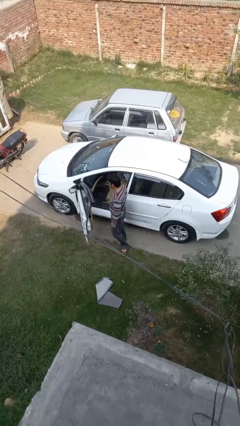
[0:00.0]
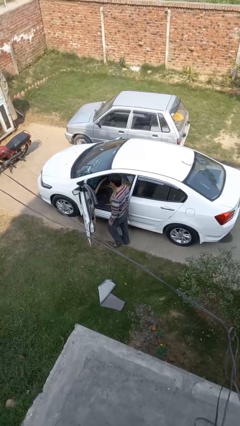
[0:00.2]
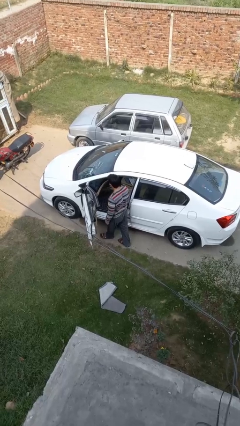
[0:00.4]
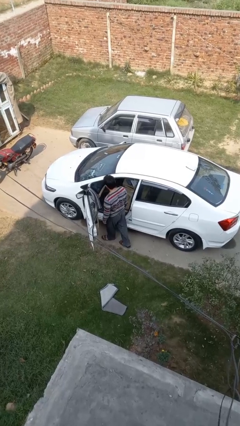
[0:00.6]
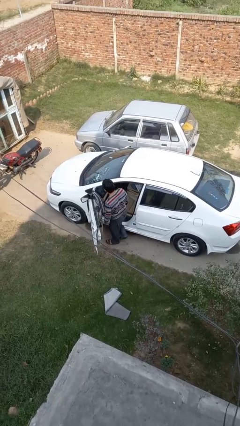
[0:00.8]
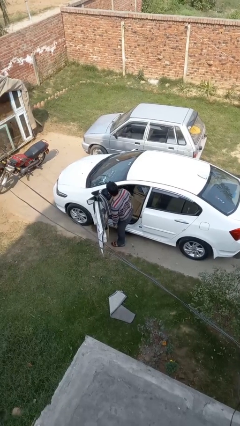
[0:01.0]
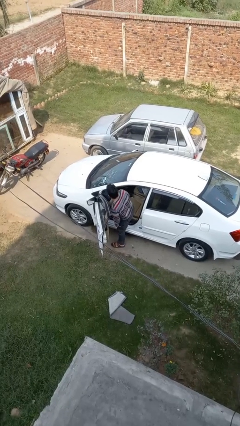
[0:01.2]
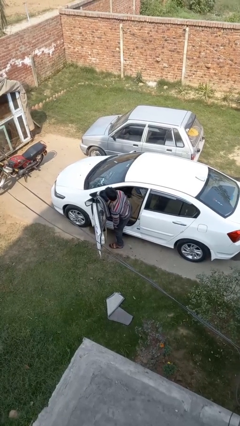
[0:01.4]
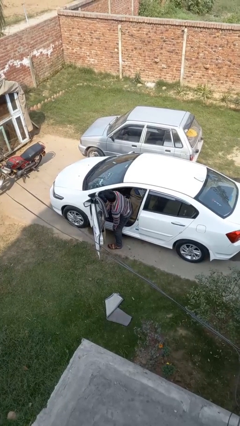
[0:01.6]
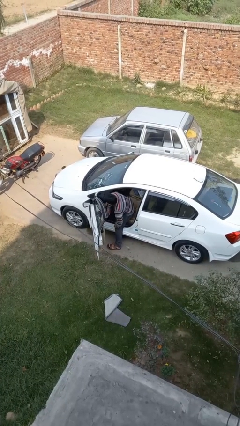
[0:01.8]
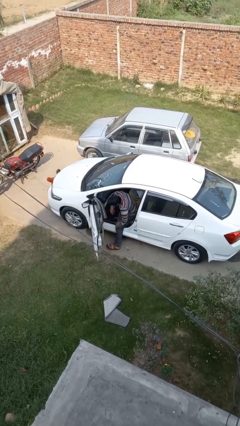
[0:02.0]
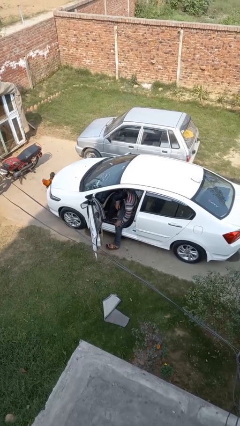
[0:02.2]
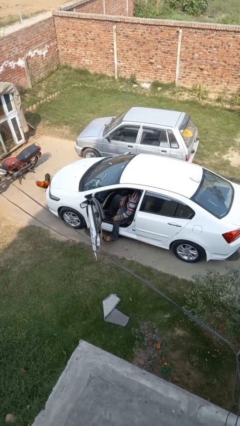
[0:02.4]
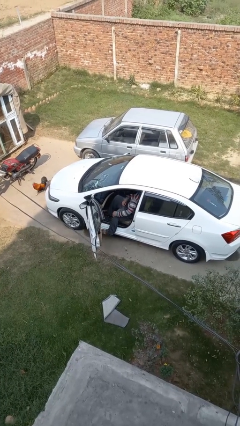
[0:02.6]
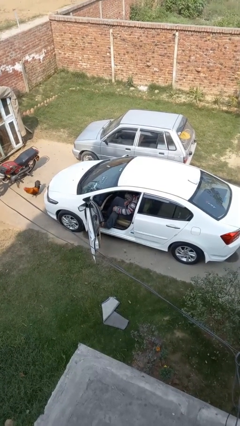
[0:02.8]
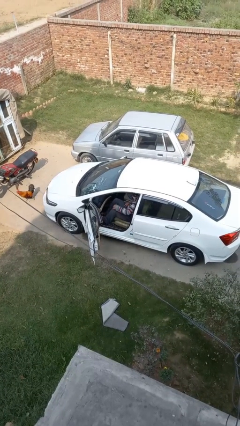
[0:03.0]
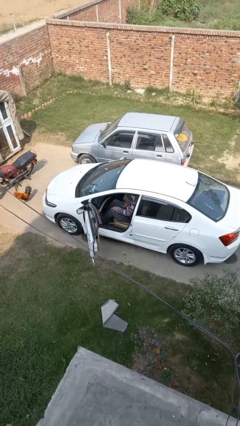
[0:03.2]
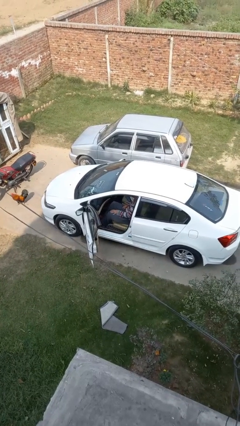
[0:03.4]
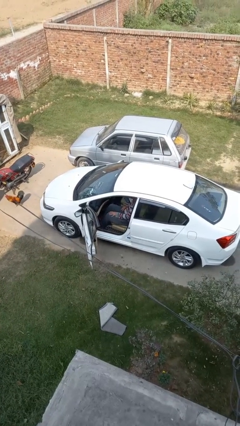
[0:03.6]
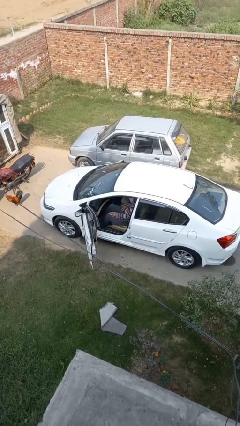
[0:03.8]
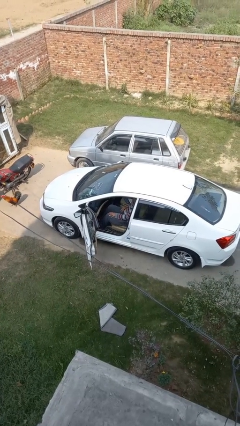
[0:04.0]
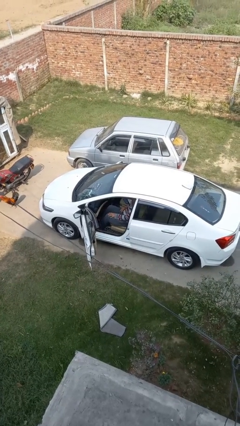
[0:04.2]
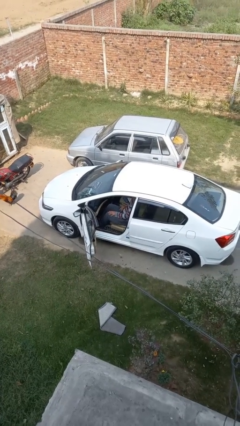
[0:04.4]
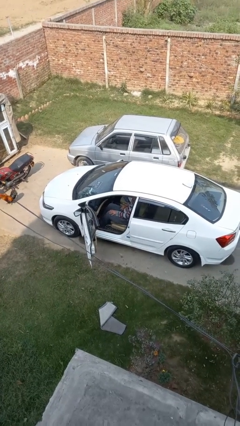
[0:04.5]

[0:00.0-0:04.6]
person enters car

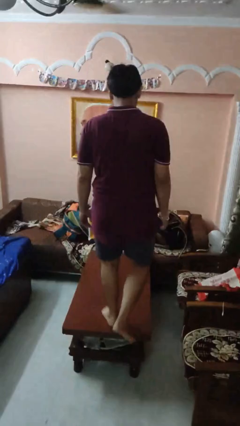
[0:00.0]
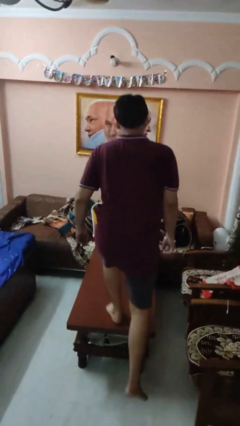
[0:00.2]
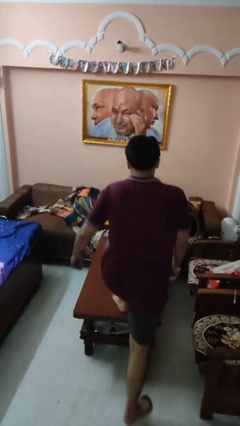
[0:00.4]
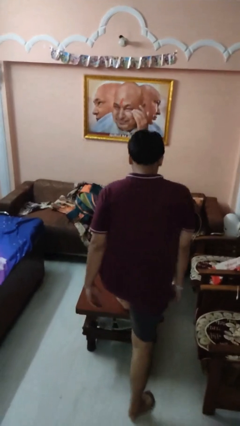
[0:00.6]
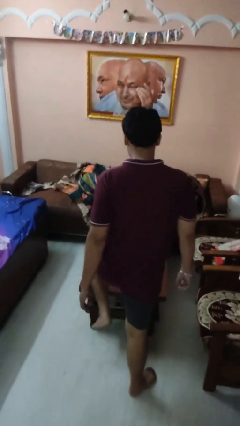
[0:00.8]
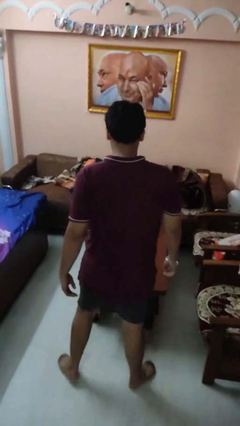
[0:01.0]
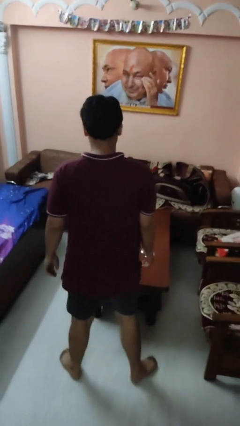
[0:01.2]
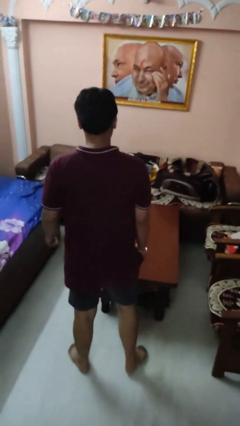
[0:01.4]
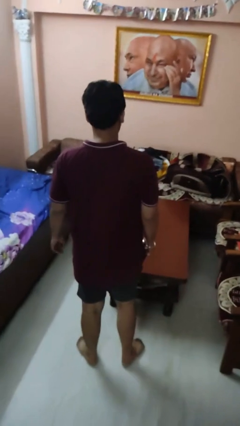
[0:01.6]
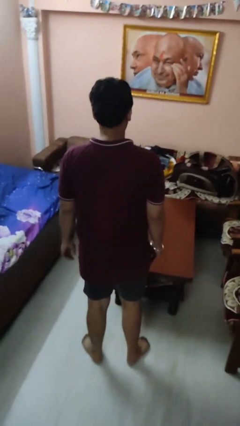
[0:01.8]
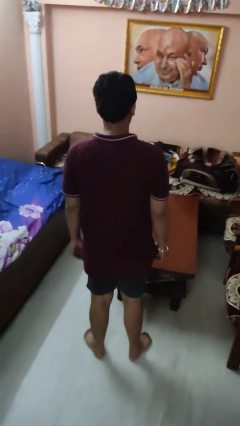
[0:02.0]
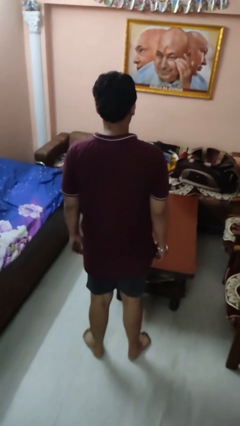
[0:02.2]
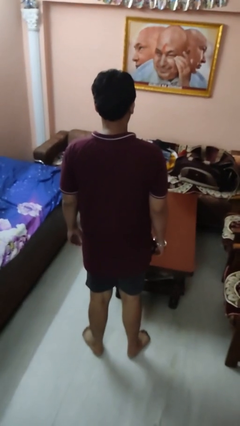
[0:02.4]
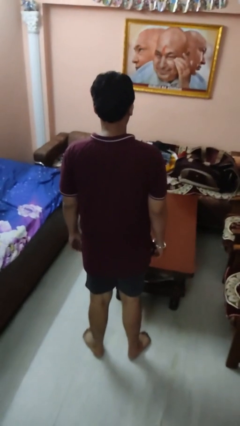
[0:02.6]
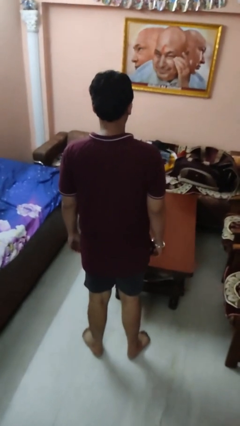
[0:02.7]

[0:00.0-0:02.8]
person climbs off table

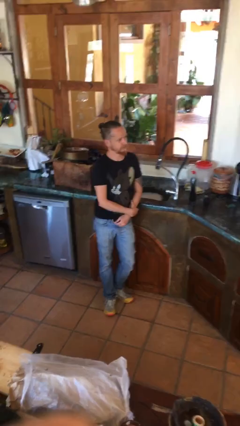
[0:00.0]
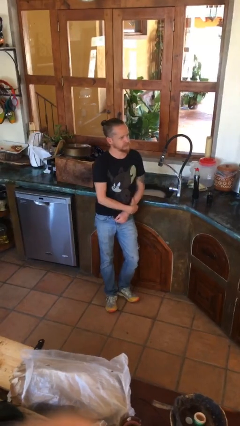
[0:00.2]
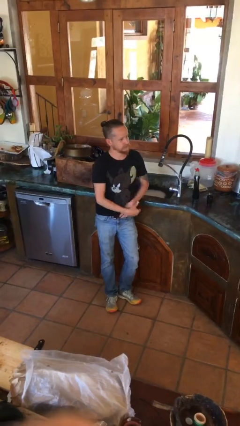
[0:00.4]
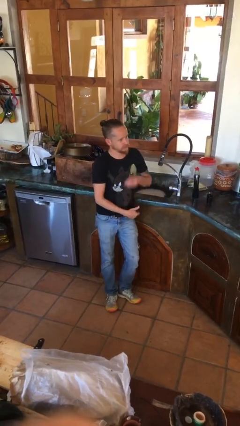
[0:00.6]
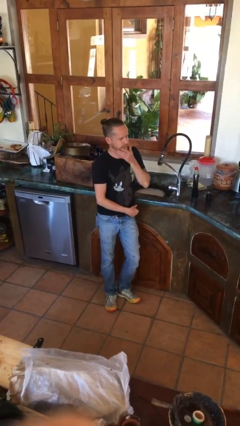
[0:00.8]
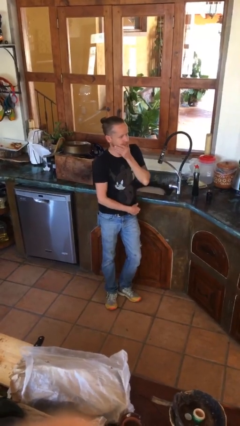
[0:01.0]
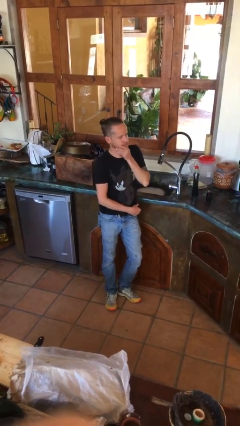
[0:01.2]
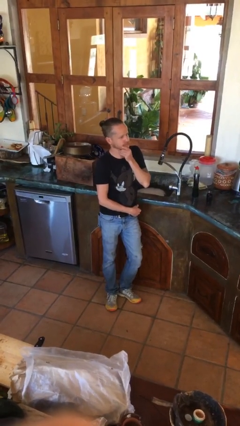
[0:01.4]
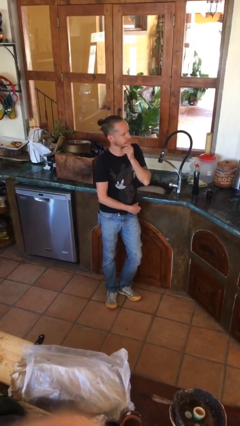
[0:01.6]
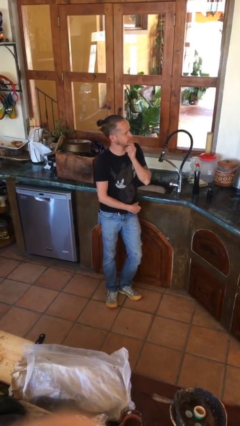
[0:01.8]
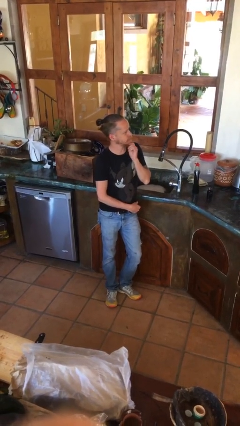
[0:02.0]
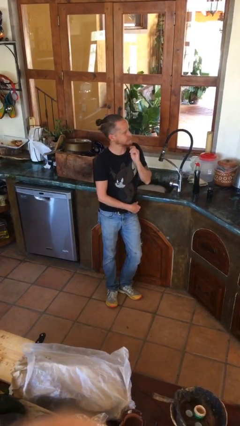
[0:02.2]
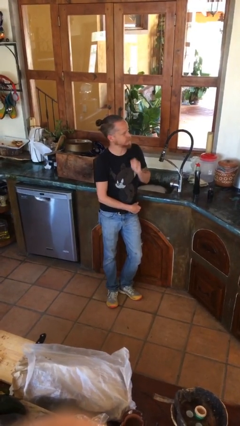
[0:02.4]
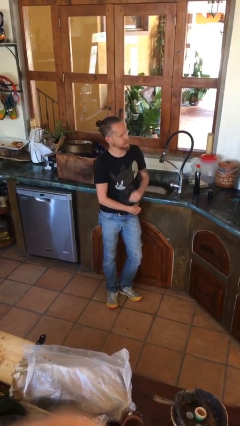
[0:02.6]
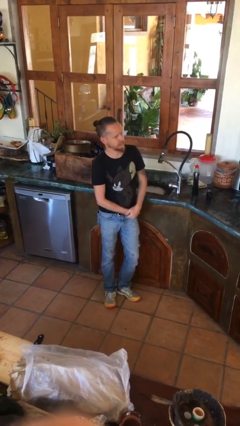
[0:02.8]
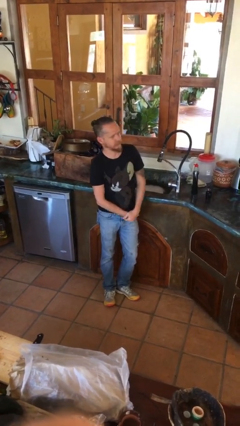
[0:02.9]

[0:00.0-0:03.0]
person strokes chin

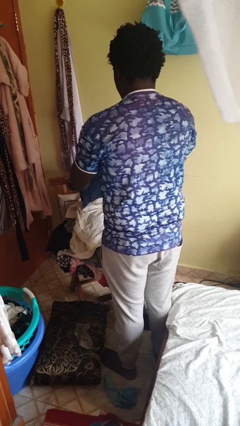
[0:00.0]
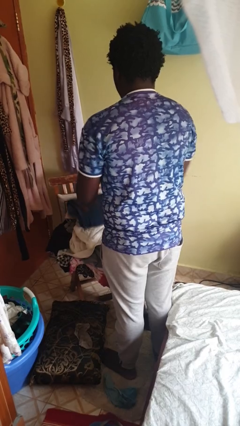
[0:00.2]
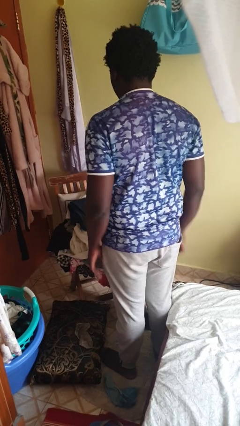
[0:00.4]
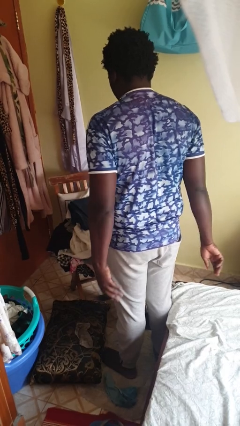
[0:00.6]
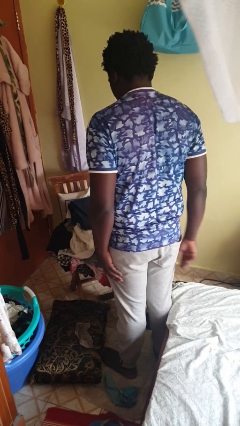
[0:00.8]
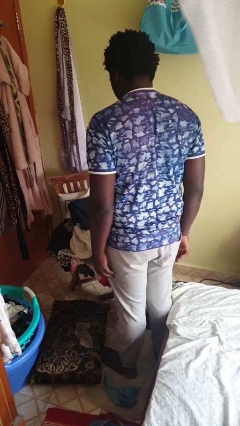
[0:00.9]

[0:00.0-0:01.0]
person folds pants

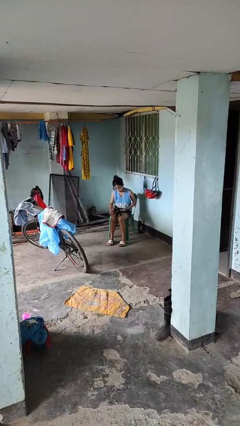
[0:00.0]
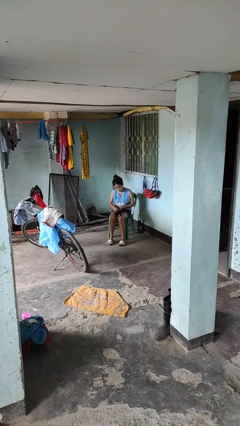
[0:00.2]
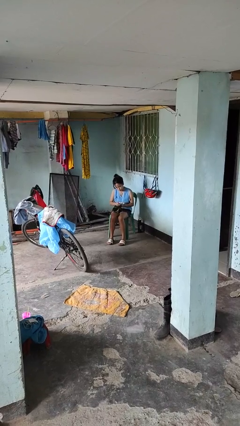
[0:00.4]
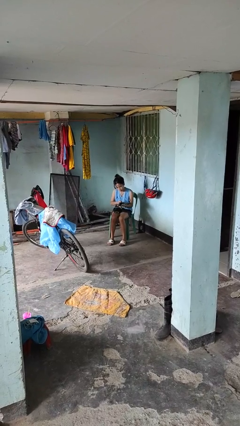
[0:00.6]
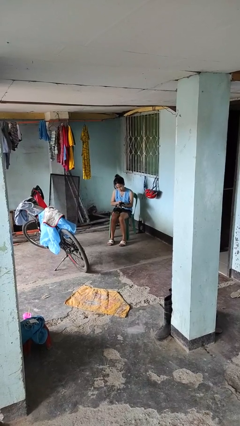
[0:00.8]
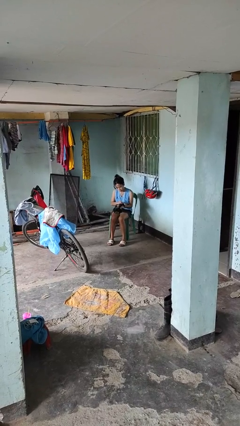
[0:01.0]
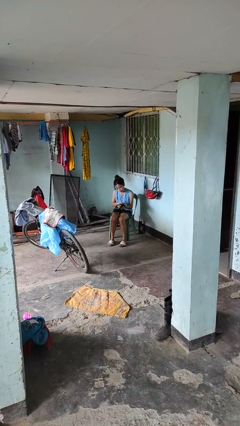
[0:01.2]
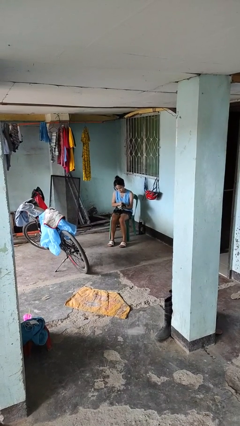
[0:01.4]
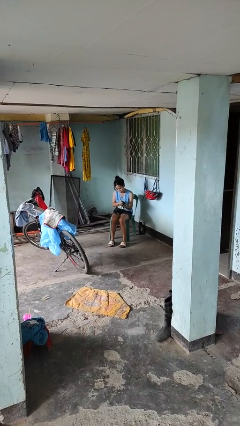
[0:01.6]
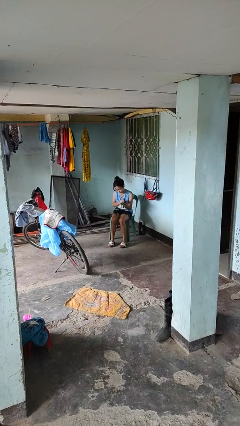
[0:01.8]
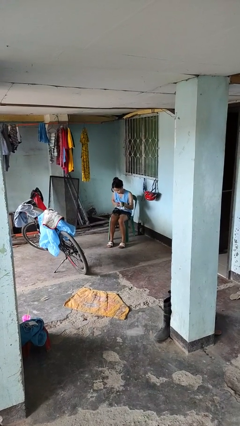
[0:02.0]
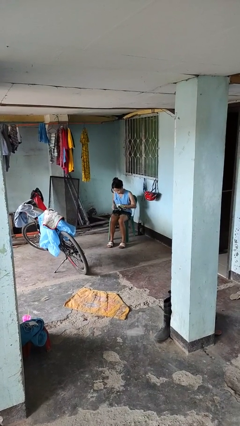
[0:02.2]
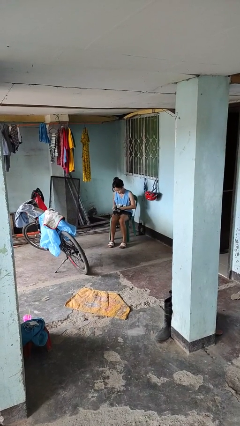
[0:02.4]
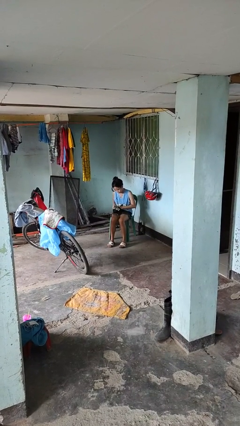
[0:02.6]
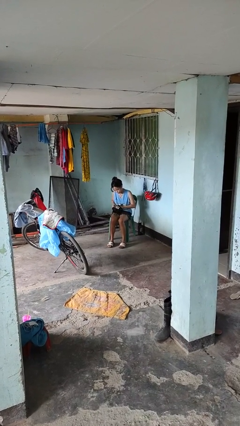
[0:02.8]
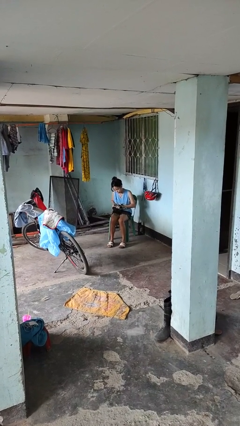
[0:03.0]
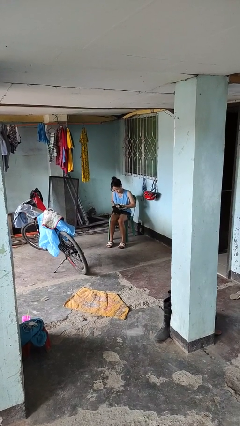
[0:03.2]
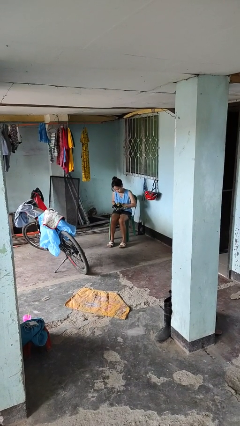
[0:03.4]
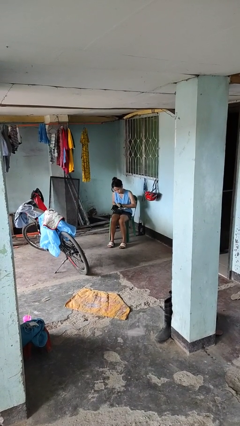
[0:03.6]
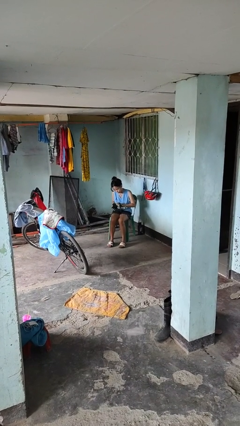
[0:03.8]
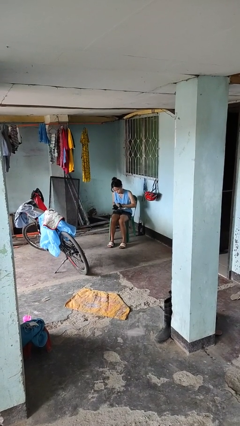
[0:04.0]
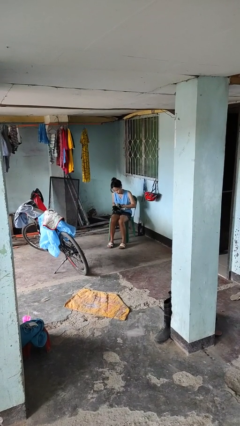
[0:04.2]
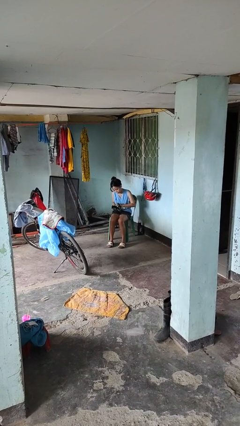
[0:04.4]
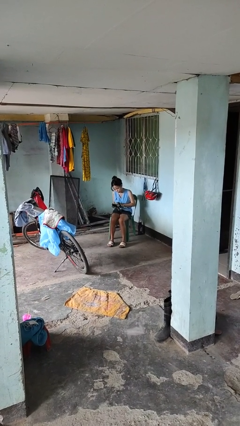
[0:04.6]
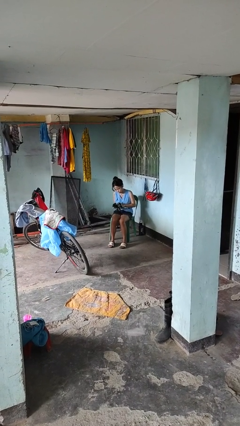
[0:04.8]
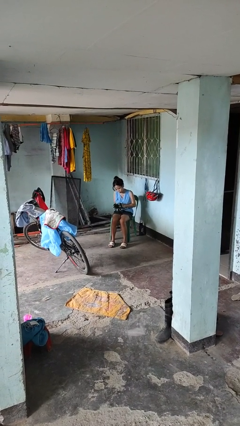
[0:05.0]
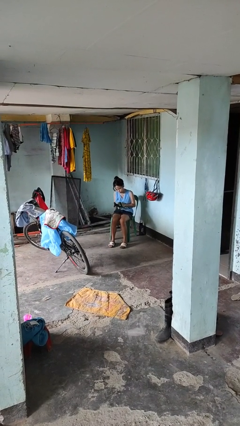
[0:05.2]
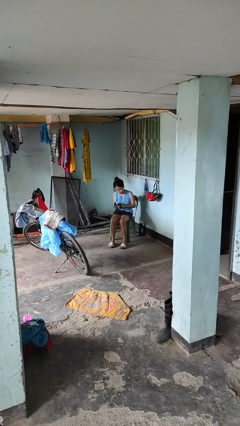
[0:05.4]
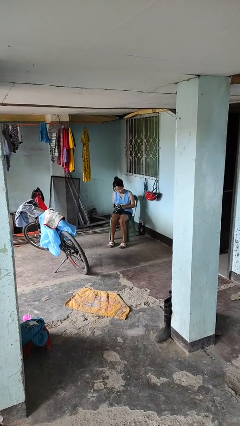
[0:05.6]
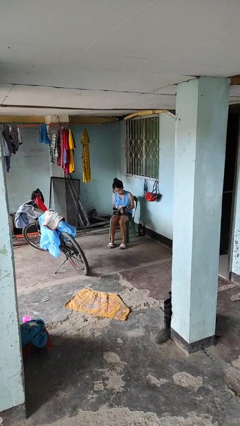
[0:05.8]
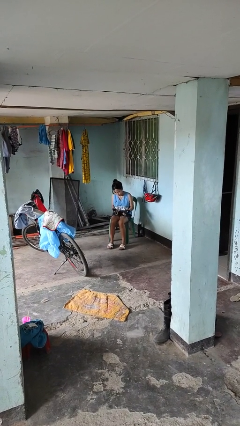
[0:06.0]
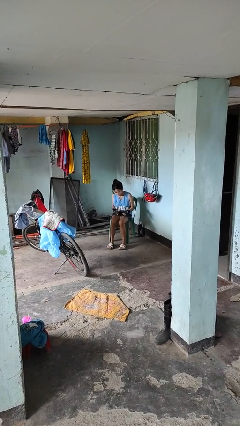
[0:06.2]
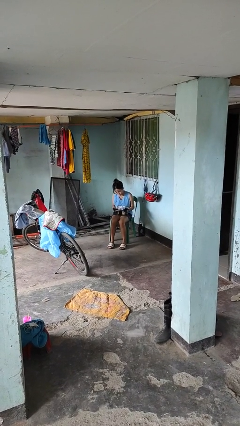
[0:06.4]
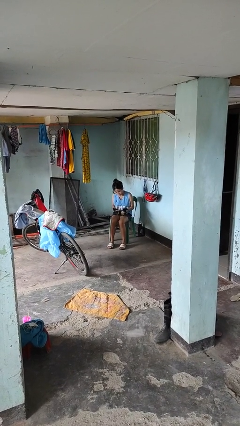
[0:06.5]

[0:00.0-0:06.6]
person puts on gloves
